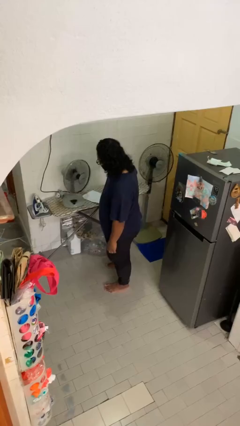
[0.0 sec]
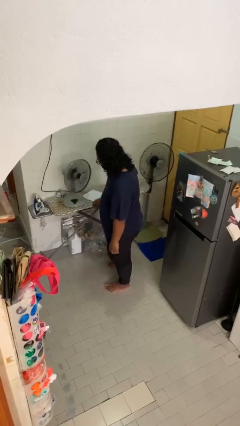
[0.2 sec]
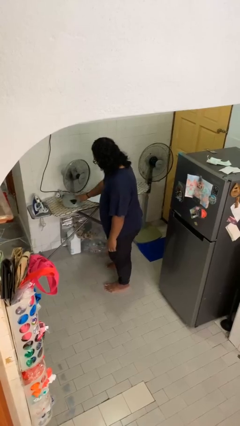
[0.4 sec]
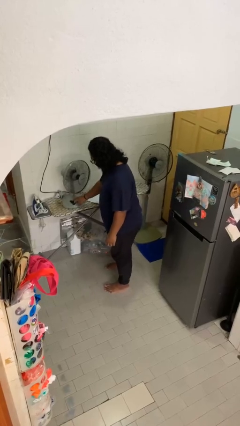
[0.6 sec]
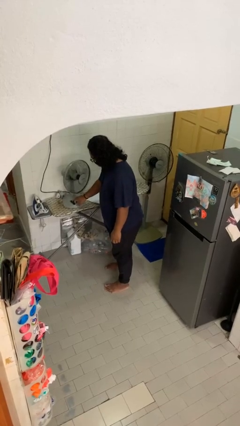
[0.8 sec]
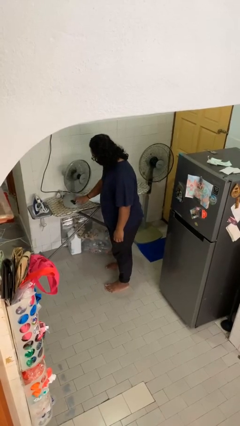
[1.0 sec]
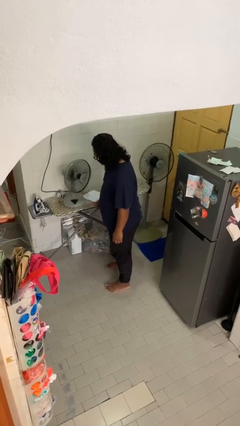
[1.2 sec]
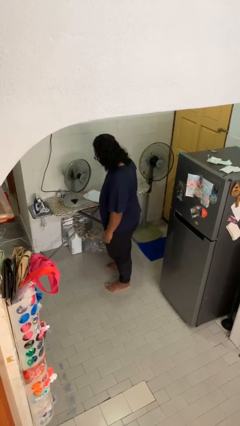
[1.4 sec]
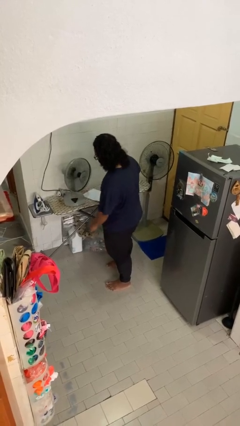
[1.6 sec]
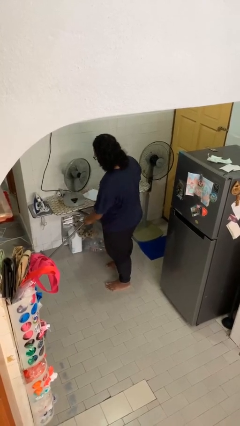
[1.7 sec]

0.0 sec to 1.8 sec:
person turns on fan

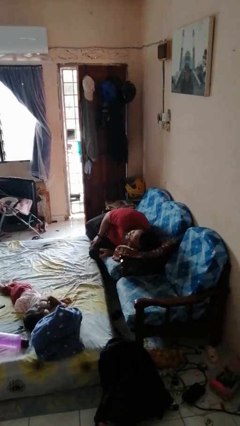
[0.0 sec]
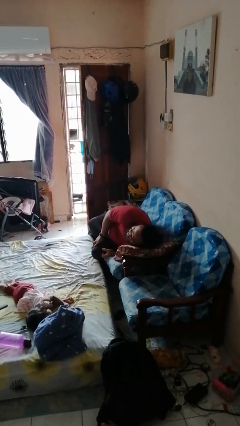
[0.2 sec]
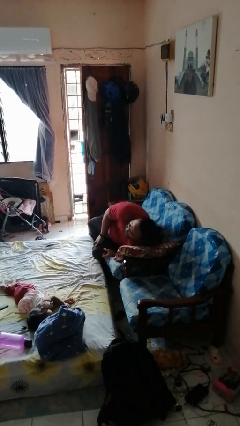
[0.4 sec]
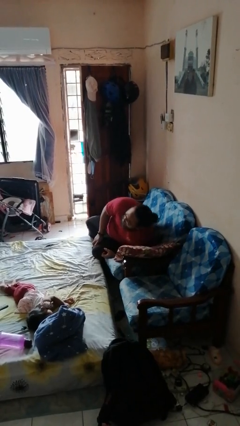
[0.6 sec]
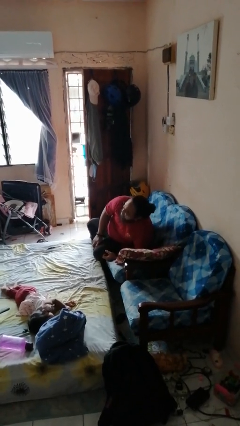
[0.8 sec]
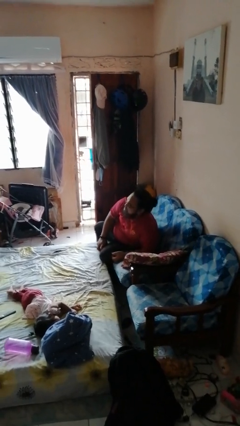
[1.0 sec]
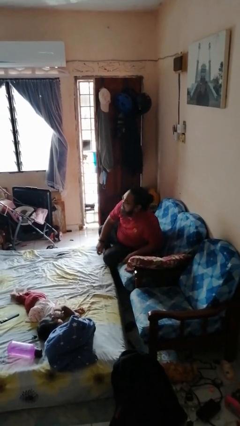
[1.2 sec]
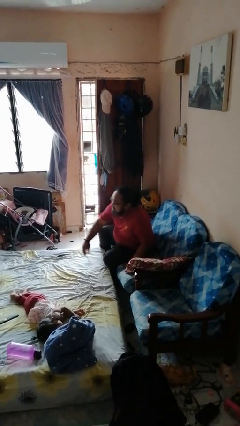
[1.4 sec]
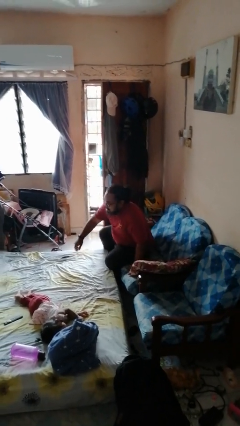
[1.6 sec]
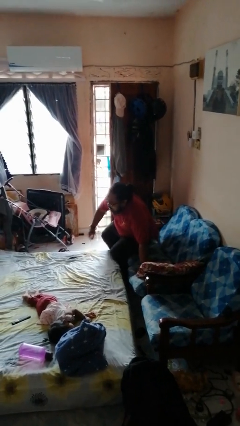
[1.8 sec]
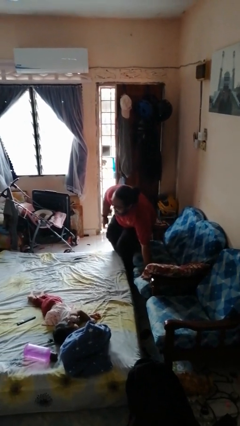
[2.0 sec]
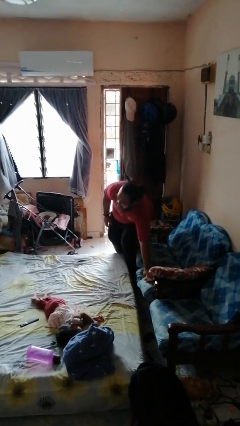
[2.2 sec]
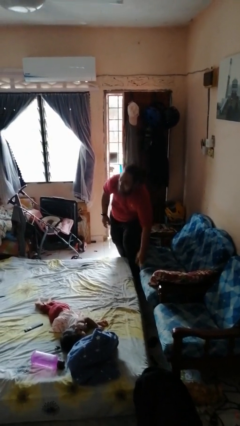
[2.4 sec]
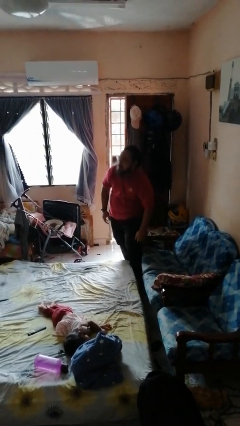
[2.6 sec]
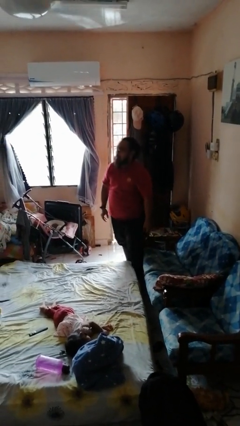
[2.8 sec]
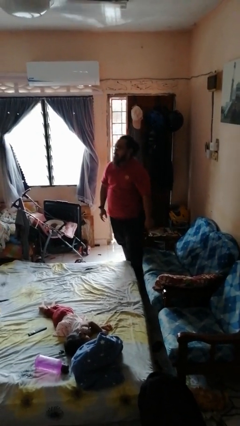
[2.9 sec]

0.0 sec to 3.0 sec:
person stands up

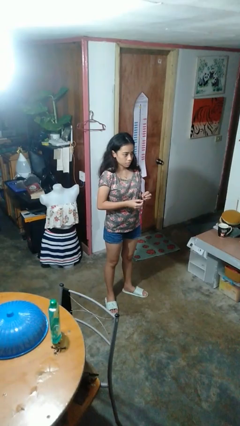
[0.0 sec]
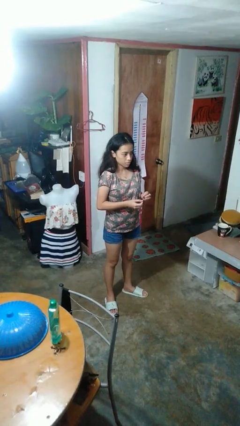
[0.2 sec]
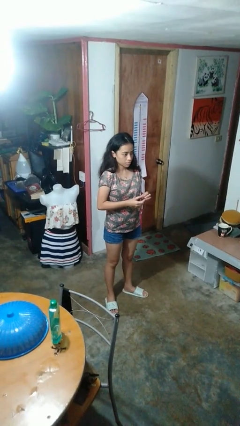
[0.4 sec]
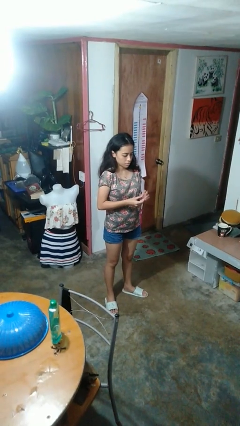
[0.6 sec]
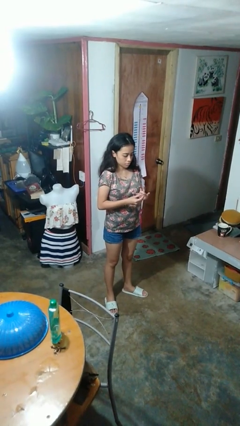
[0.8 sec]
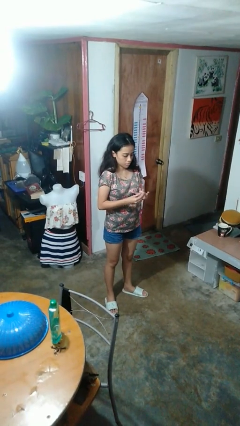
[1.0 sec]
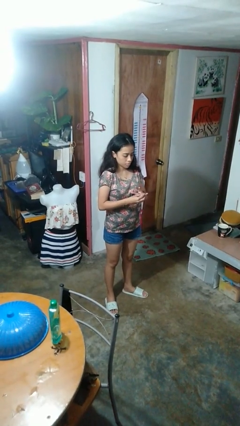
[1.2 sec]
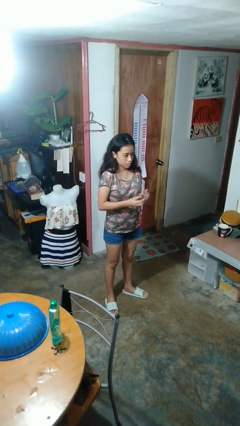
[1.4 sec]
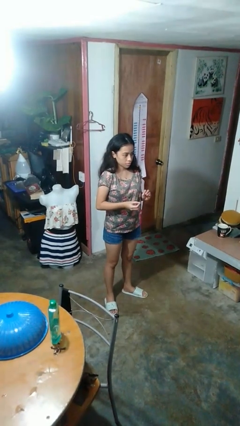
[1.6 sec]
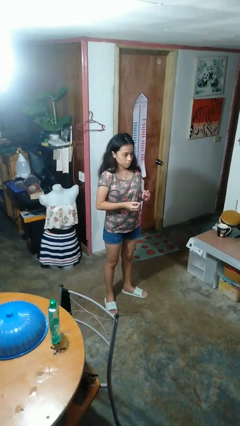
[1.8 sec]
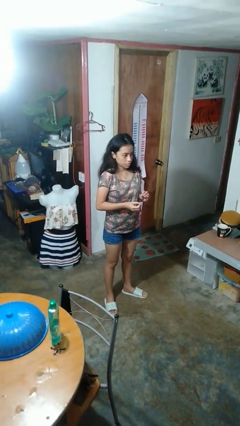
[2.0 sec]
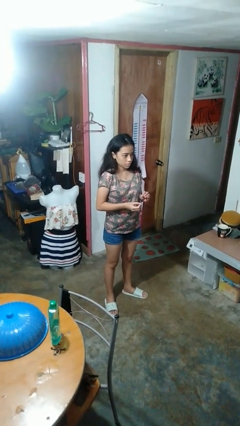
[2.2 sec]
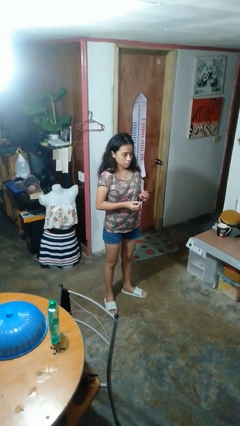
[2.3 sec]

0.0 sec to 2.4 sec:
person puts on ring

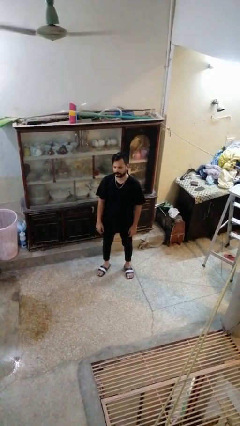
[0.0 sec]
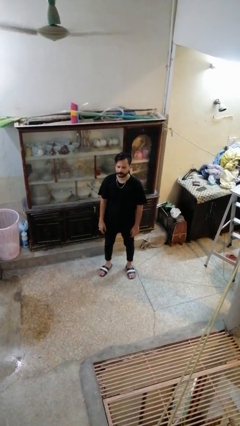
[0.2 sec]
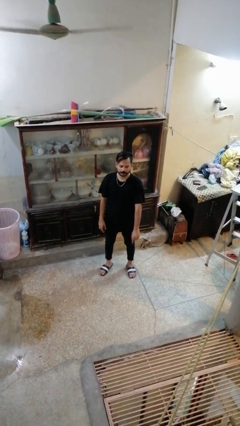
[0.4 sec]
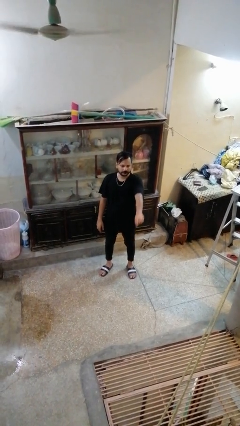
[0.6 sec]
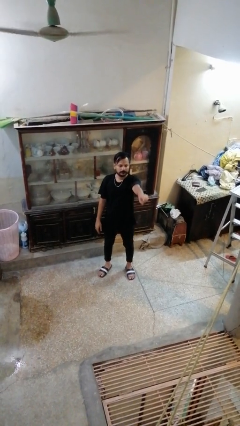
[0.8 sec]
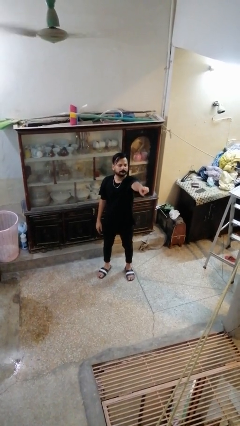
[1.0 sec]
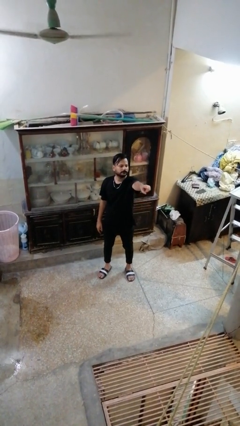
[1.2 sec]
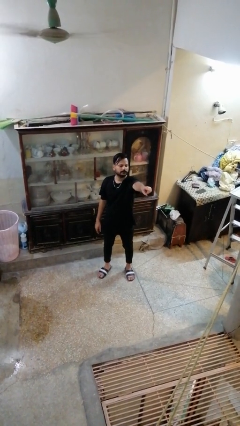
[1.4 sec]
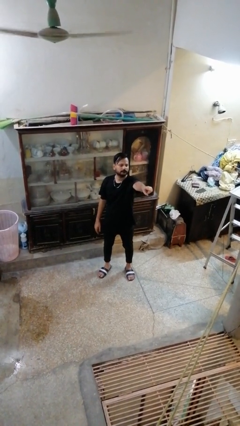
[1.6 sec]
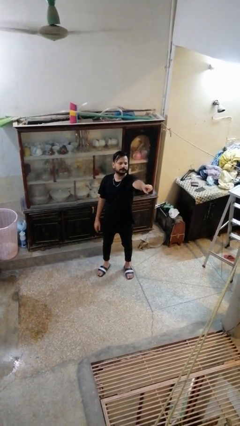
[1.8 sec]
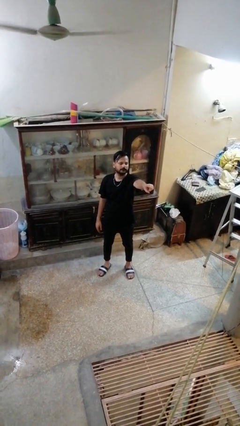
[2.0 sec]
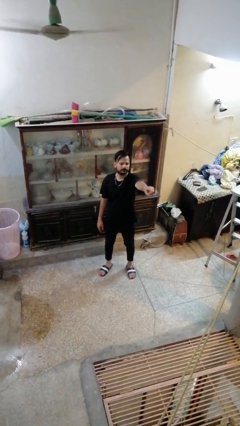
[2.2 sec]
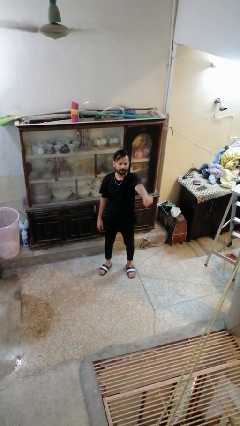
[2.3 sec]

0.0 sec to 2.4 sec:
person points at person

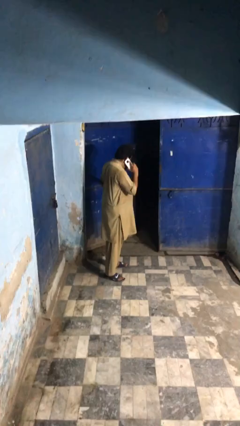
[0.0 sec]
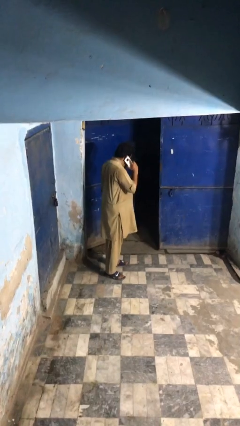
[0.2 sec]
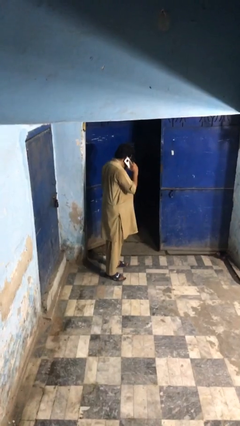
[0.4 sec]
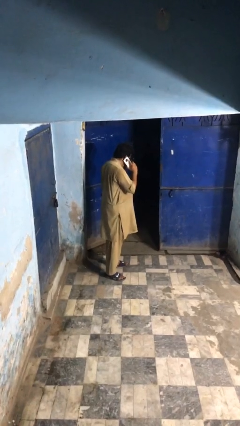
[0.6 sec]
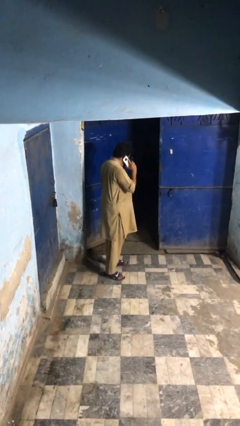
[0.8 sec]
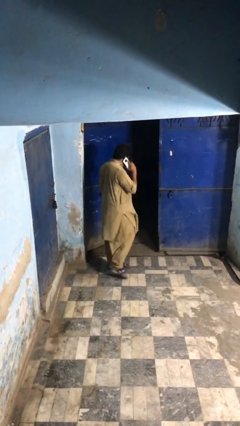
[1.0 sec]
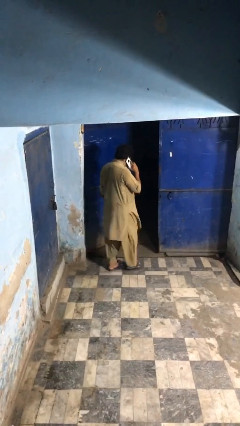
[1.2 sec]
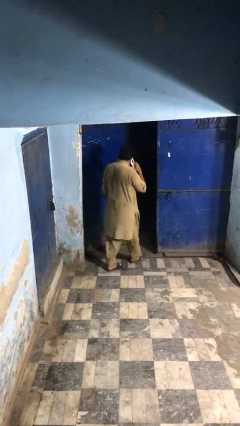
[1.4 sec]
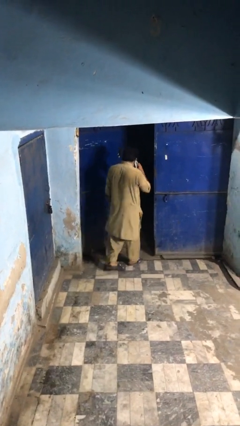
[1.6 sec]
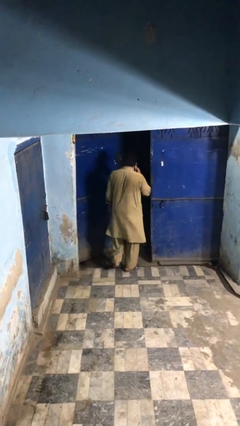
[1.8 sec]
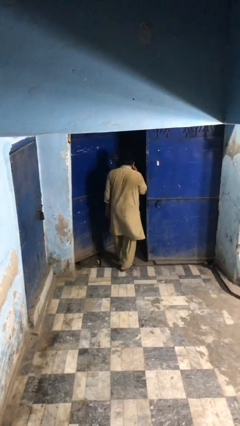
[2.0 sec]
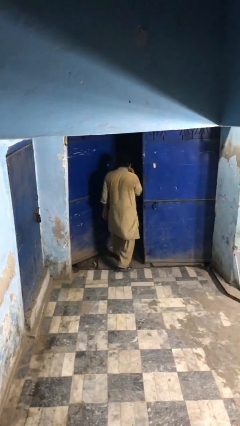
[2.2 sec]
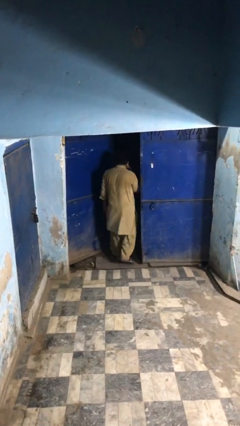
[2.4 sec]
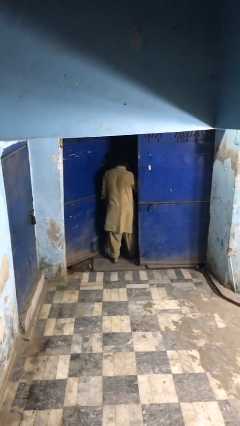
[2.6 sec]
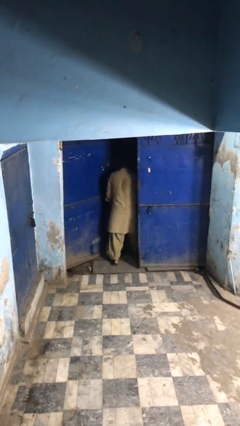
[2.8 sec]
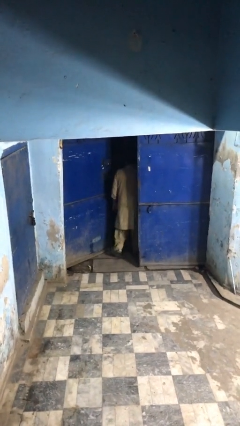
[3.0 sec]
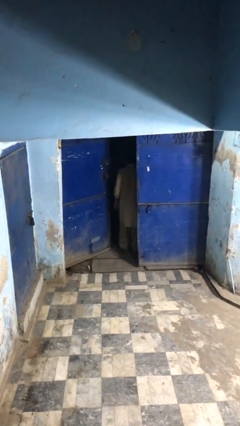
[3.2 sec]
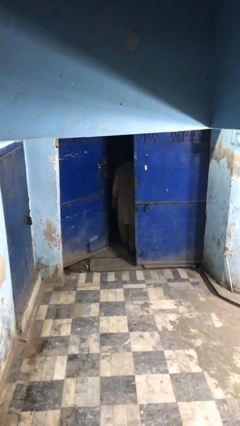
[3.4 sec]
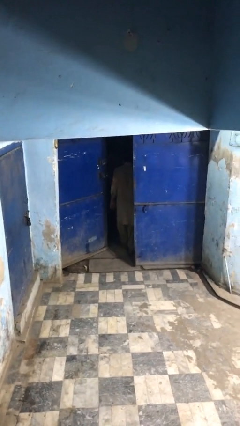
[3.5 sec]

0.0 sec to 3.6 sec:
person exits scene through structure

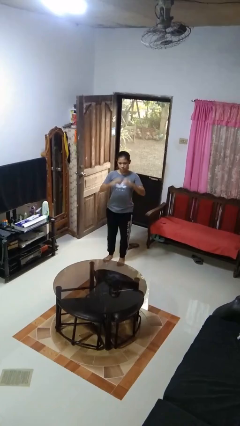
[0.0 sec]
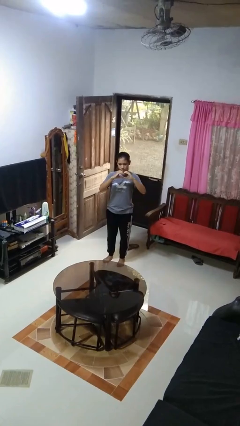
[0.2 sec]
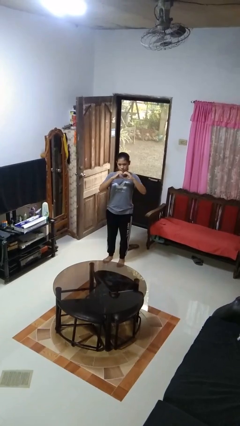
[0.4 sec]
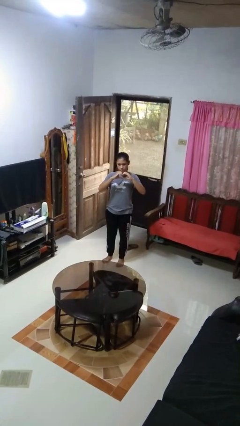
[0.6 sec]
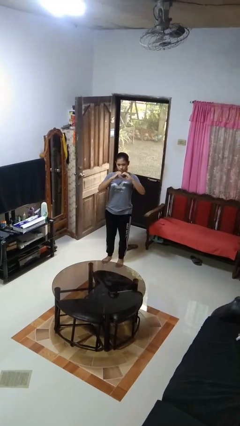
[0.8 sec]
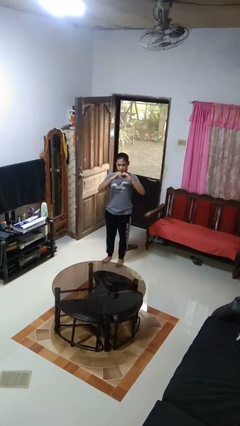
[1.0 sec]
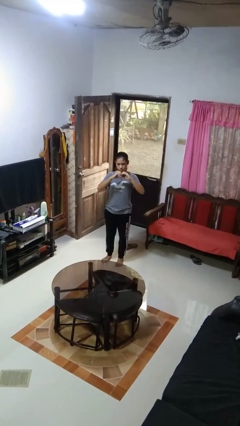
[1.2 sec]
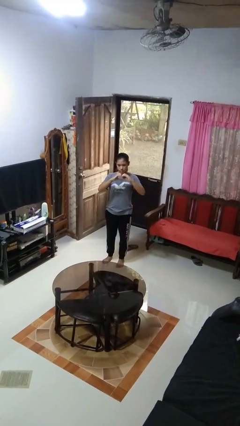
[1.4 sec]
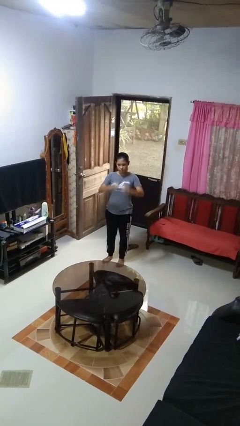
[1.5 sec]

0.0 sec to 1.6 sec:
person gestures heart

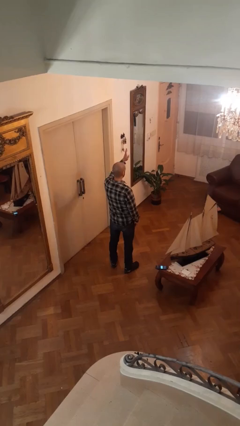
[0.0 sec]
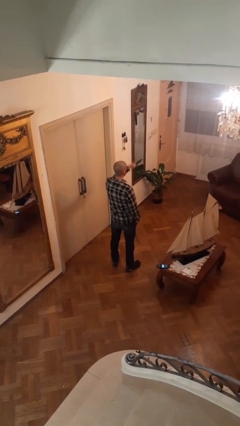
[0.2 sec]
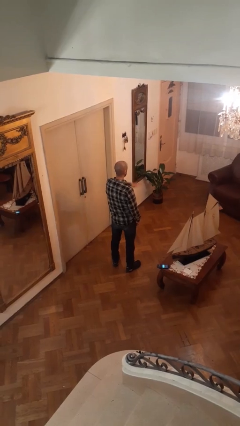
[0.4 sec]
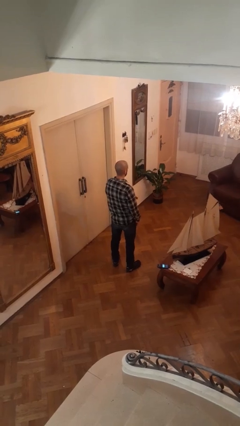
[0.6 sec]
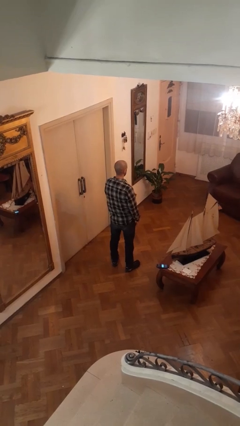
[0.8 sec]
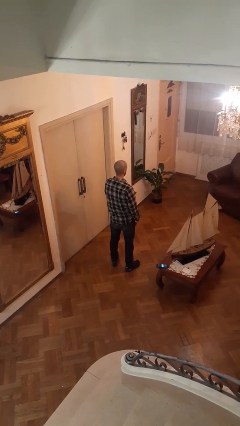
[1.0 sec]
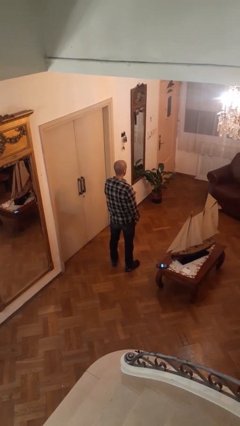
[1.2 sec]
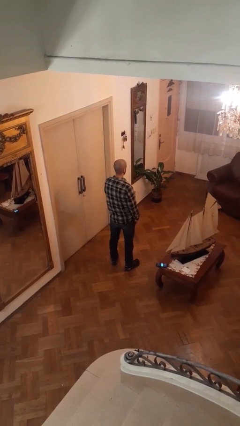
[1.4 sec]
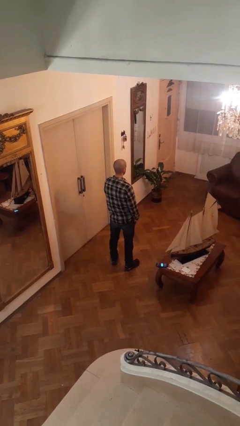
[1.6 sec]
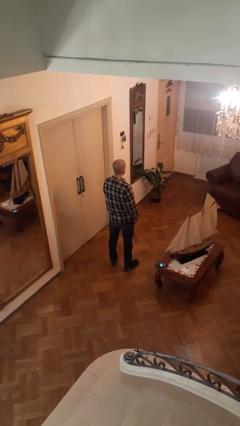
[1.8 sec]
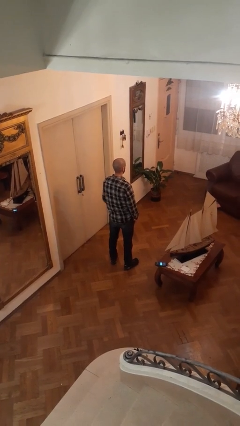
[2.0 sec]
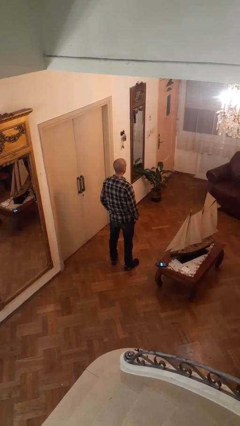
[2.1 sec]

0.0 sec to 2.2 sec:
person gestures swipe down
